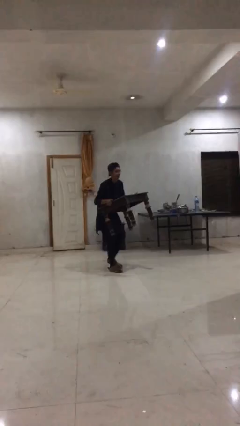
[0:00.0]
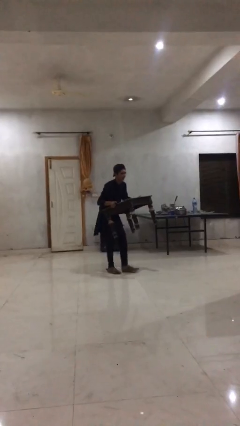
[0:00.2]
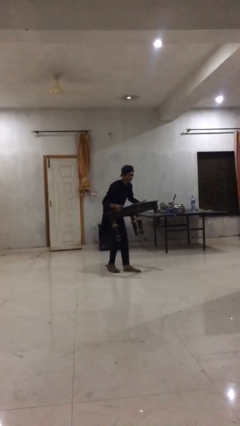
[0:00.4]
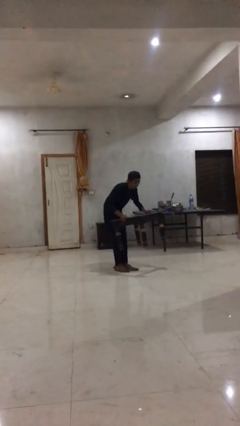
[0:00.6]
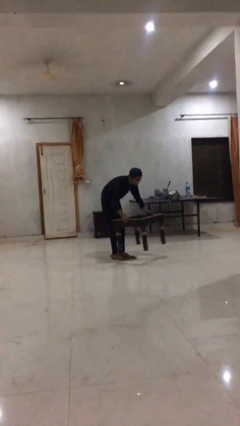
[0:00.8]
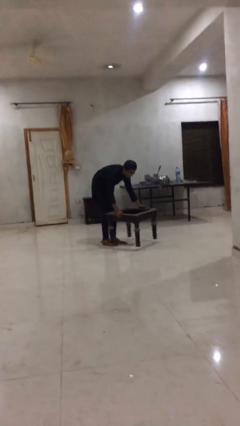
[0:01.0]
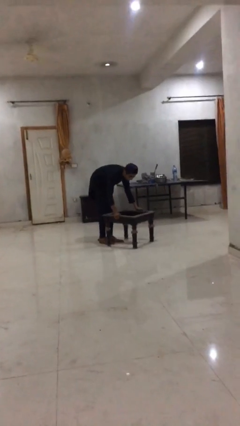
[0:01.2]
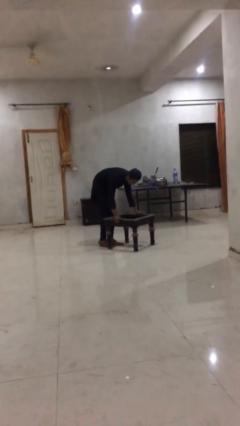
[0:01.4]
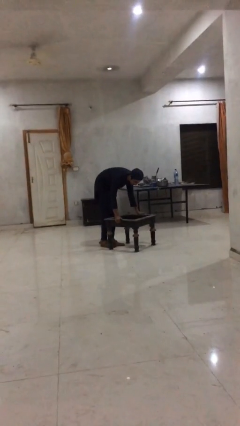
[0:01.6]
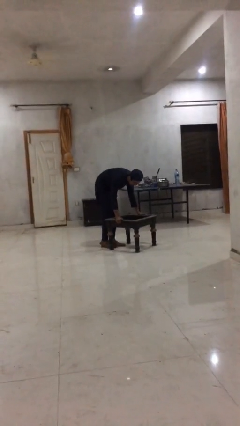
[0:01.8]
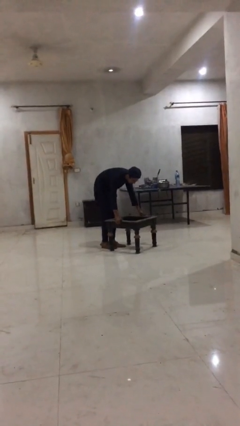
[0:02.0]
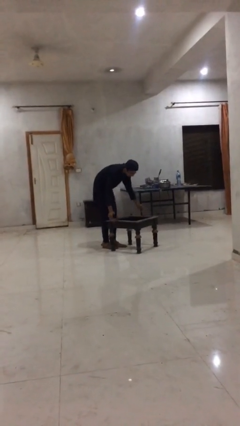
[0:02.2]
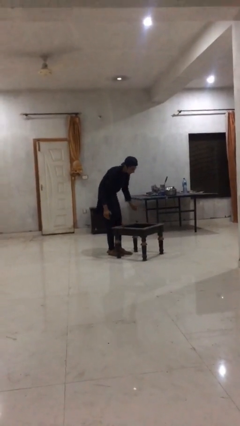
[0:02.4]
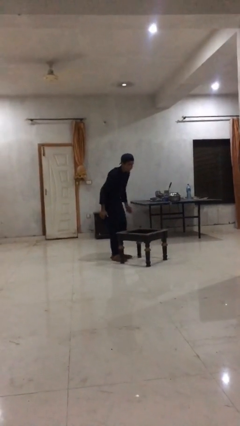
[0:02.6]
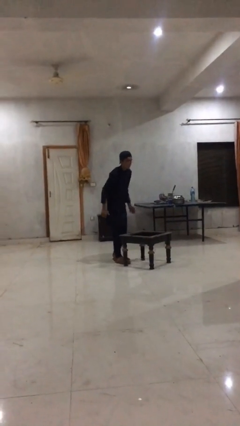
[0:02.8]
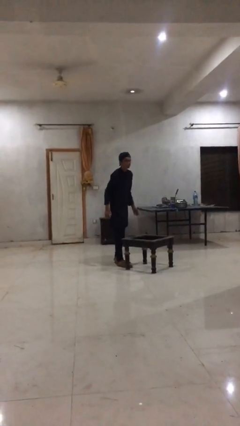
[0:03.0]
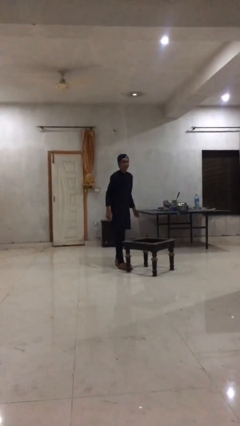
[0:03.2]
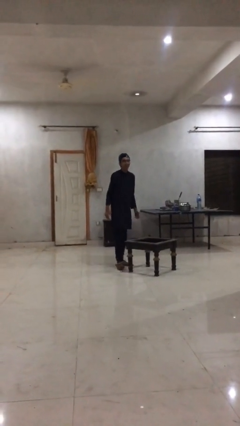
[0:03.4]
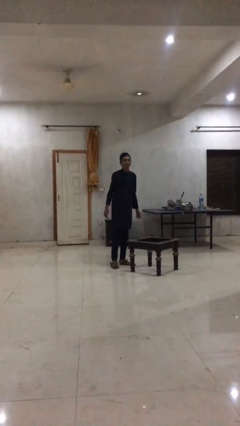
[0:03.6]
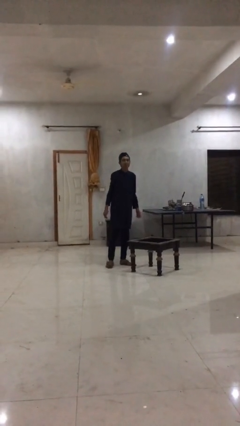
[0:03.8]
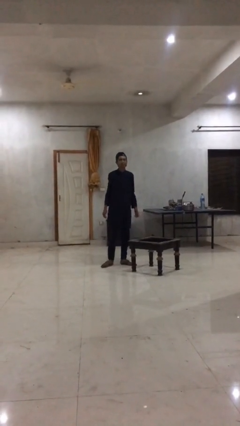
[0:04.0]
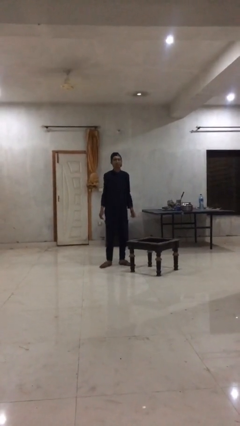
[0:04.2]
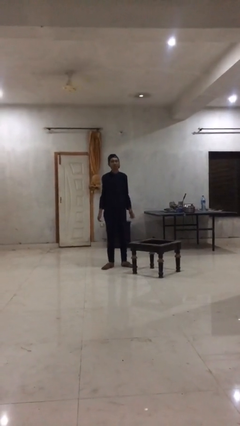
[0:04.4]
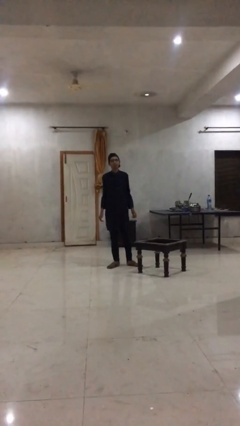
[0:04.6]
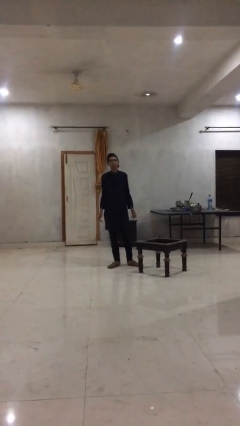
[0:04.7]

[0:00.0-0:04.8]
person puts down object on floor

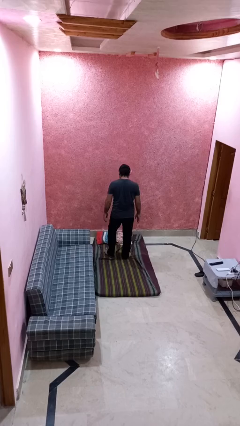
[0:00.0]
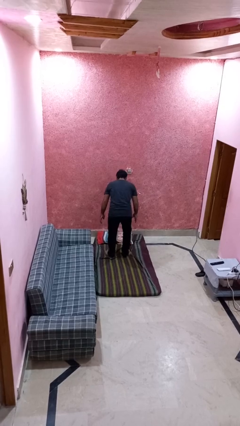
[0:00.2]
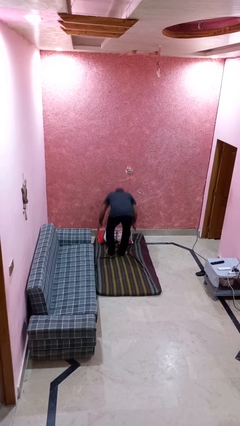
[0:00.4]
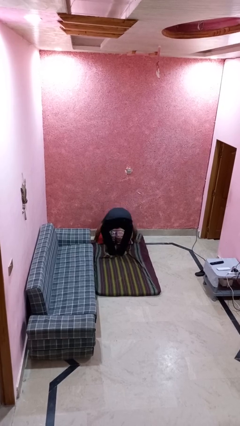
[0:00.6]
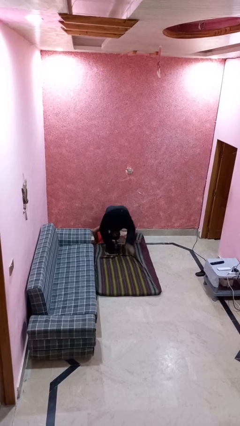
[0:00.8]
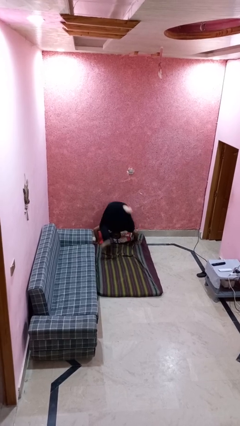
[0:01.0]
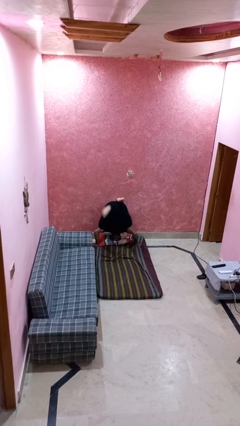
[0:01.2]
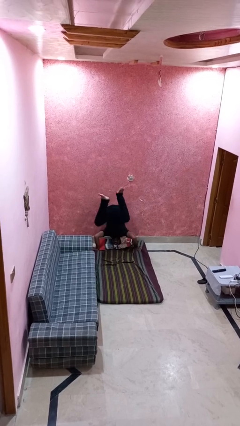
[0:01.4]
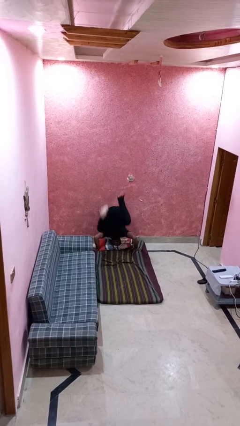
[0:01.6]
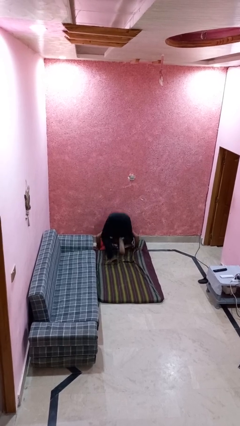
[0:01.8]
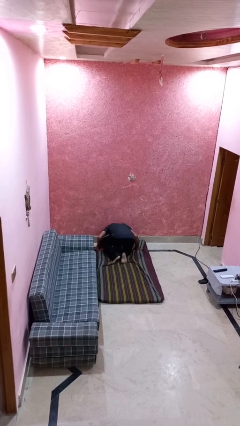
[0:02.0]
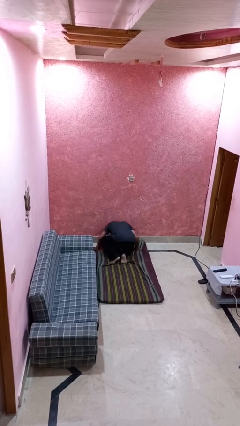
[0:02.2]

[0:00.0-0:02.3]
person handstand

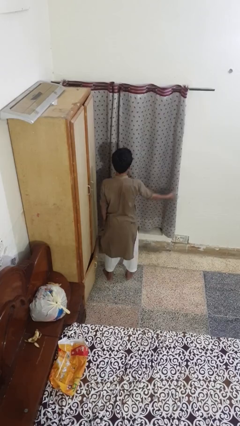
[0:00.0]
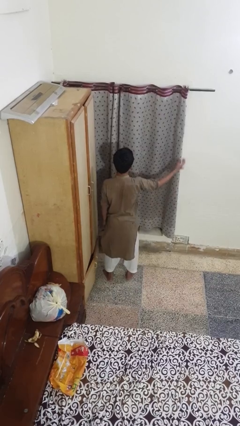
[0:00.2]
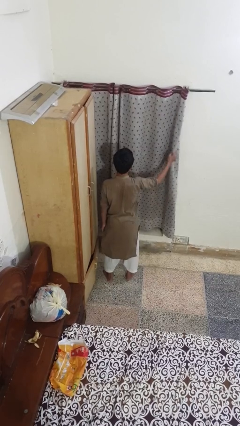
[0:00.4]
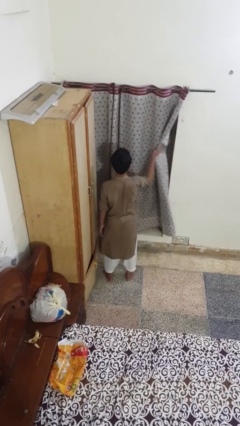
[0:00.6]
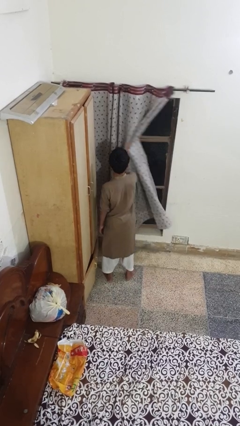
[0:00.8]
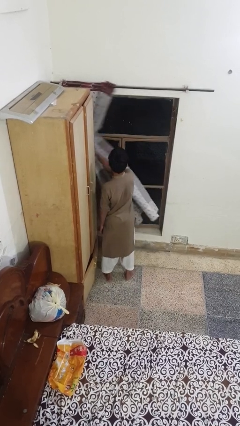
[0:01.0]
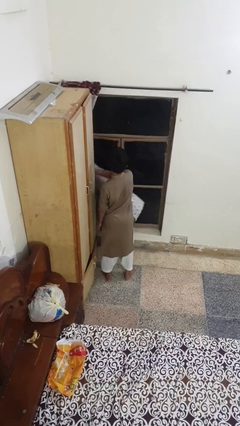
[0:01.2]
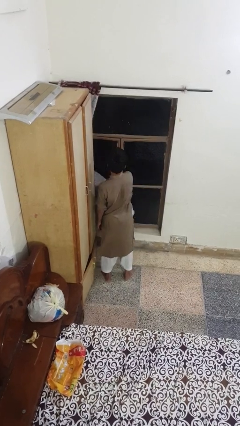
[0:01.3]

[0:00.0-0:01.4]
person opens curtains

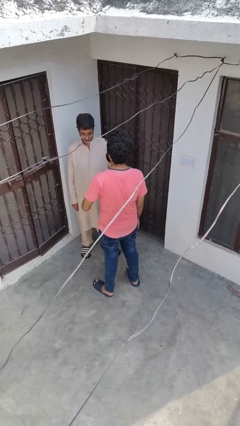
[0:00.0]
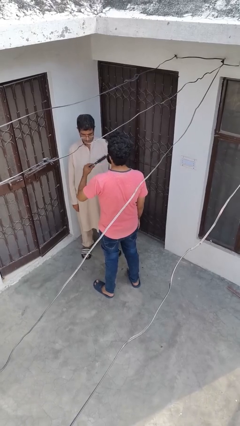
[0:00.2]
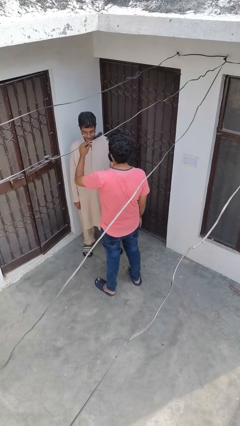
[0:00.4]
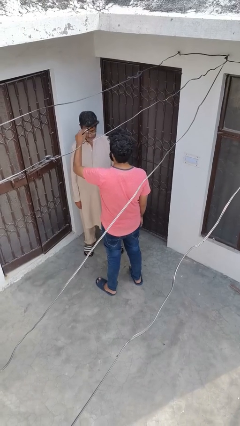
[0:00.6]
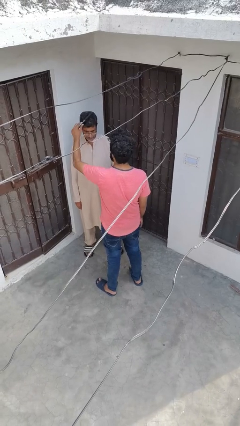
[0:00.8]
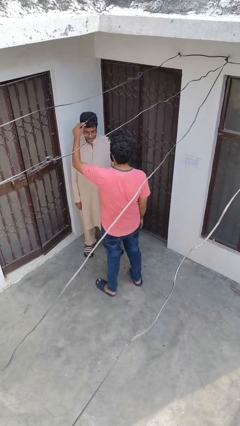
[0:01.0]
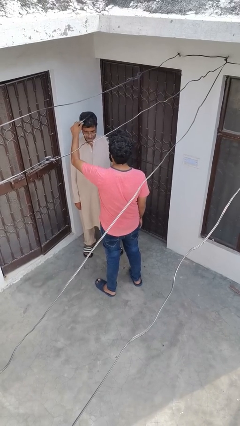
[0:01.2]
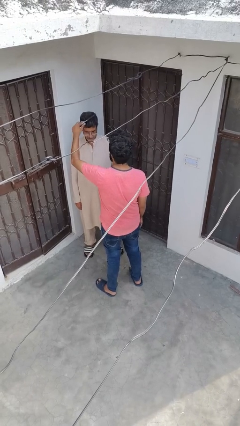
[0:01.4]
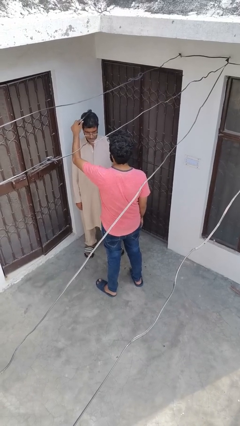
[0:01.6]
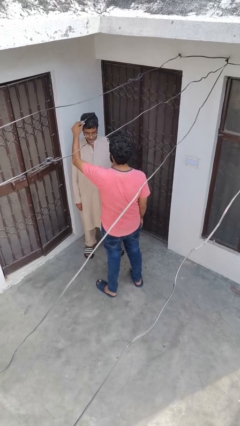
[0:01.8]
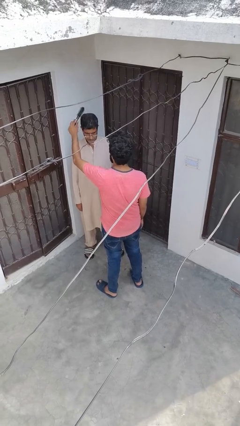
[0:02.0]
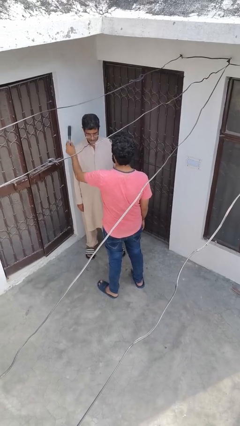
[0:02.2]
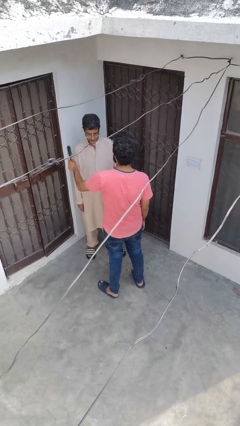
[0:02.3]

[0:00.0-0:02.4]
person brushes hair of person

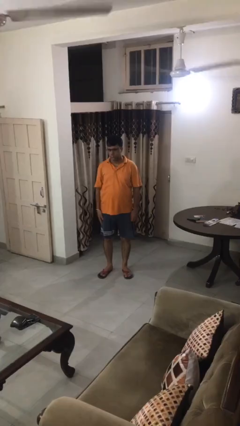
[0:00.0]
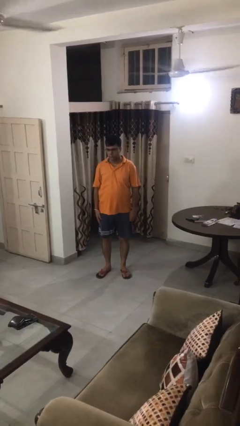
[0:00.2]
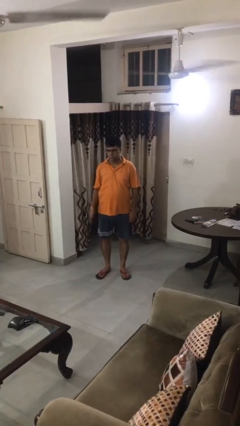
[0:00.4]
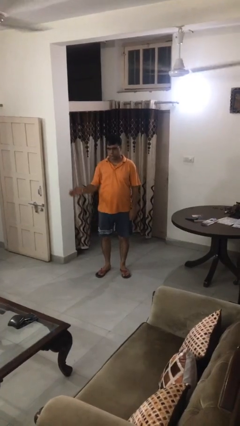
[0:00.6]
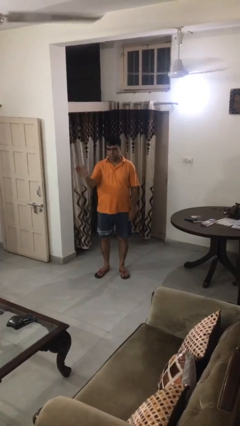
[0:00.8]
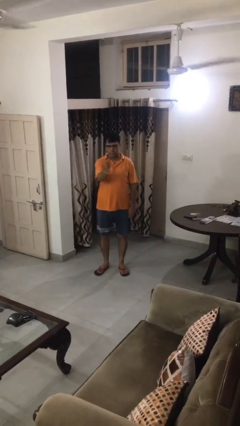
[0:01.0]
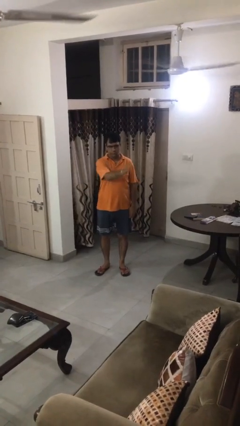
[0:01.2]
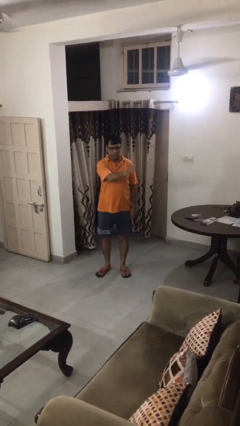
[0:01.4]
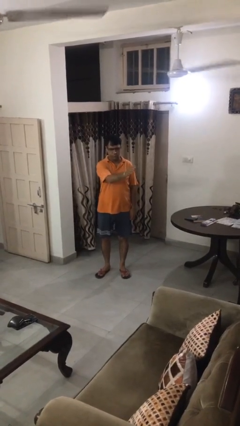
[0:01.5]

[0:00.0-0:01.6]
person gestures swipe left

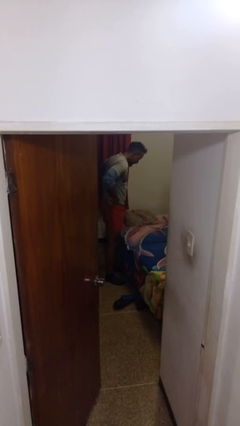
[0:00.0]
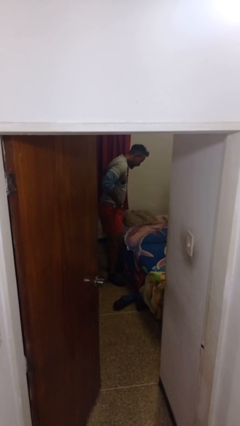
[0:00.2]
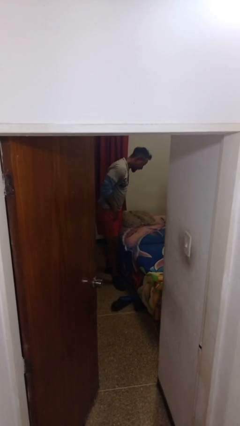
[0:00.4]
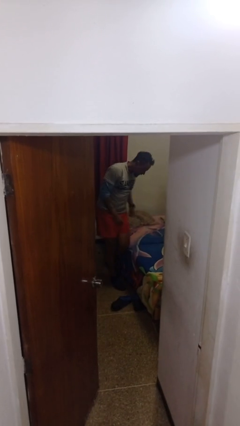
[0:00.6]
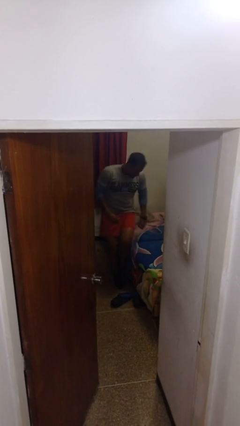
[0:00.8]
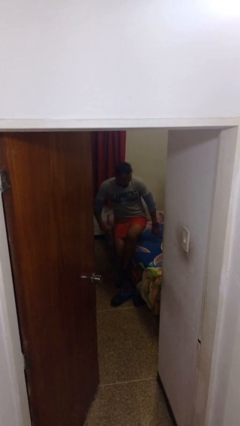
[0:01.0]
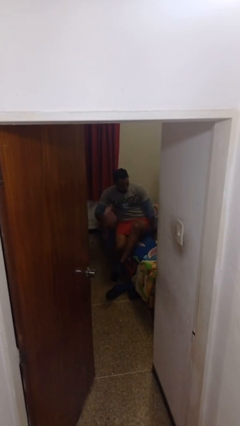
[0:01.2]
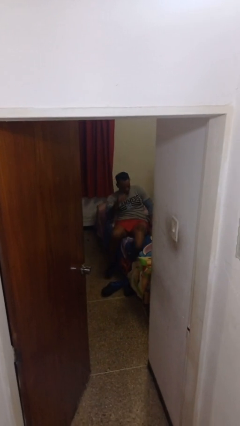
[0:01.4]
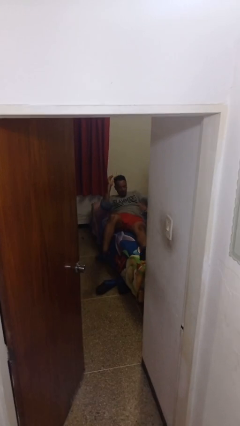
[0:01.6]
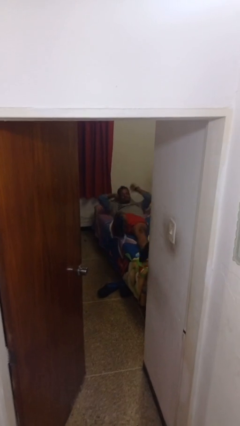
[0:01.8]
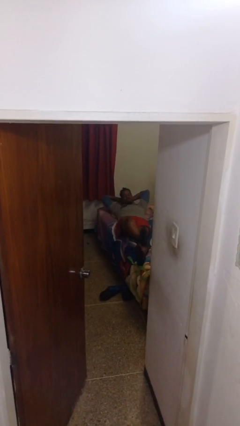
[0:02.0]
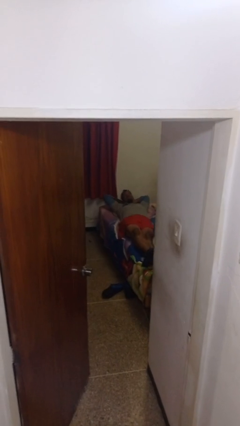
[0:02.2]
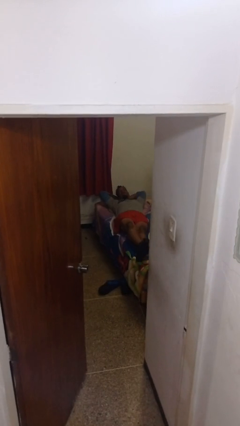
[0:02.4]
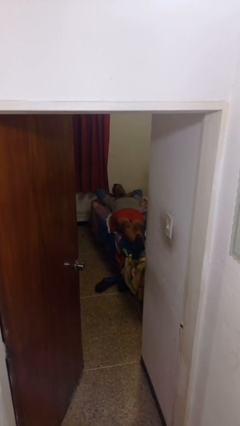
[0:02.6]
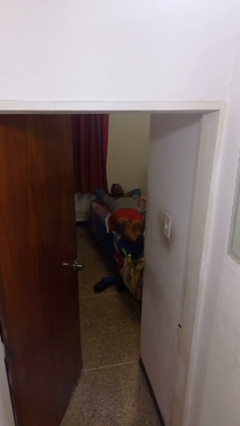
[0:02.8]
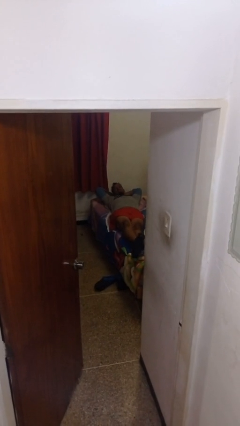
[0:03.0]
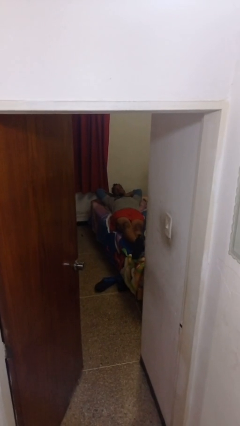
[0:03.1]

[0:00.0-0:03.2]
person lies down on bed

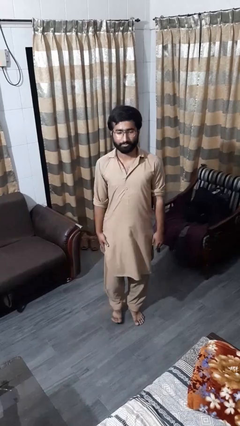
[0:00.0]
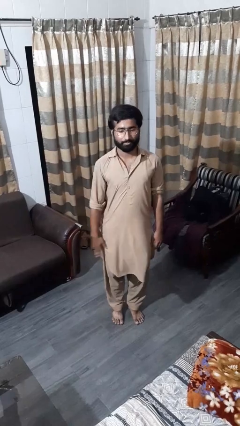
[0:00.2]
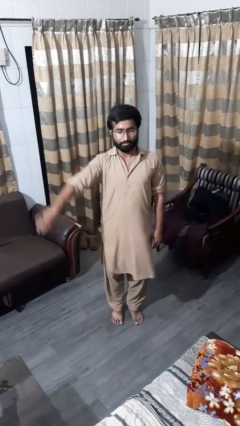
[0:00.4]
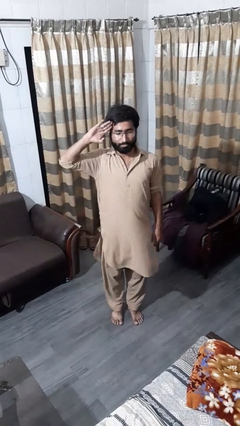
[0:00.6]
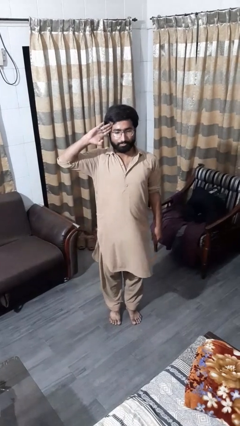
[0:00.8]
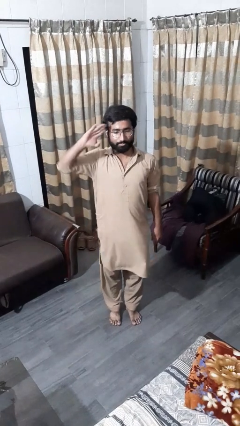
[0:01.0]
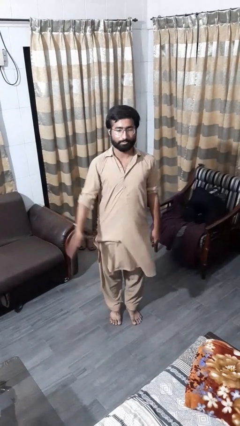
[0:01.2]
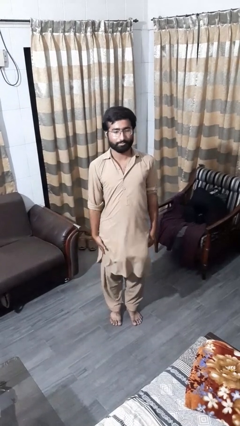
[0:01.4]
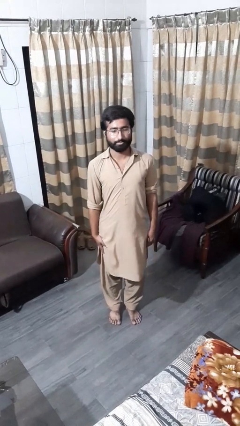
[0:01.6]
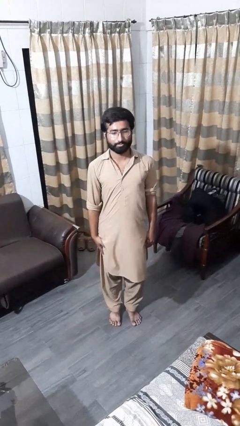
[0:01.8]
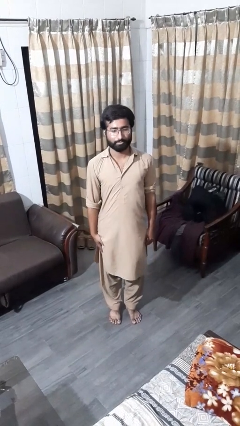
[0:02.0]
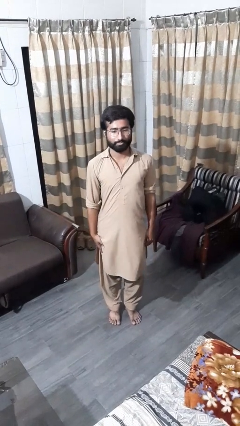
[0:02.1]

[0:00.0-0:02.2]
person salutes
